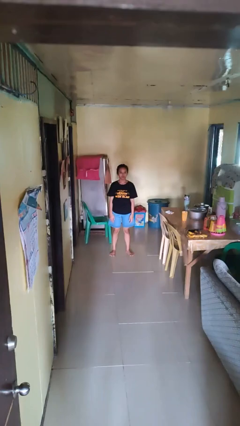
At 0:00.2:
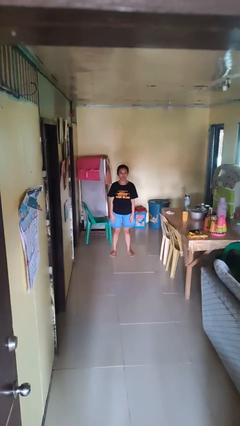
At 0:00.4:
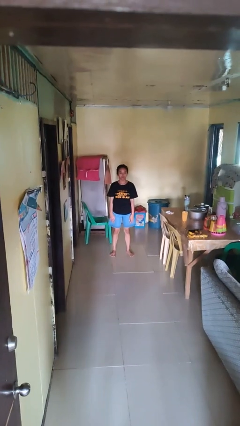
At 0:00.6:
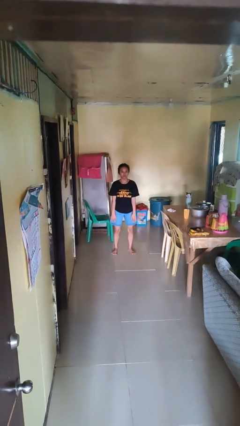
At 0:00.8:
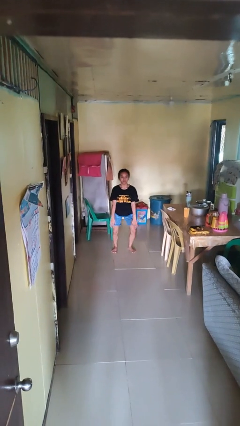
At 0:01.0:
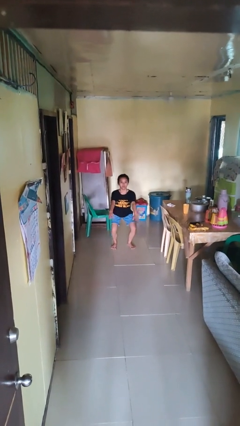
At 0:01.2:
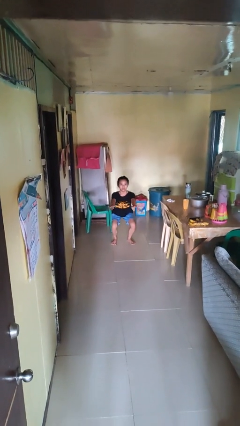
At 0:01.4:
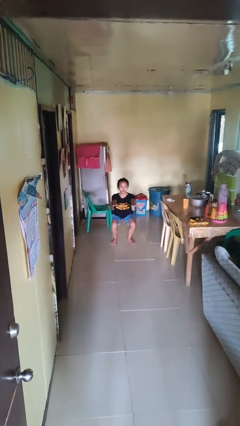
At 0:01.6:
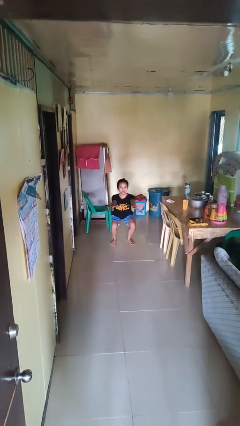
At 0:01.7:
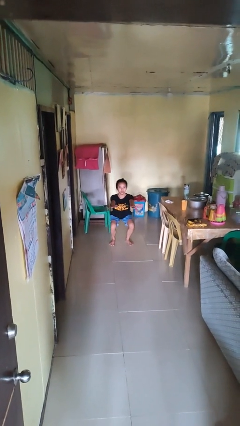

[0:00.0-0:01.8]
person squats

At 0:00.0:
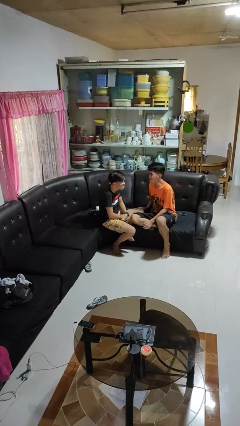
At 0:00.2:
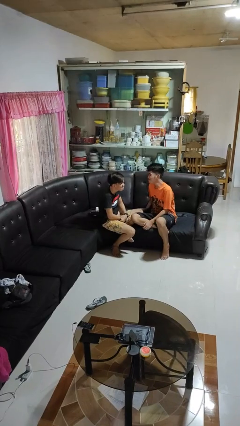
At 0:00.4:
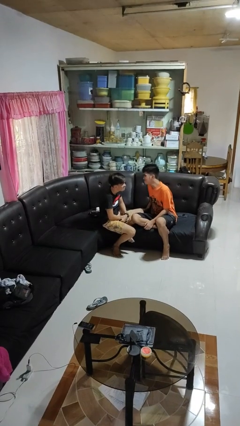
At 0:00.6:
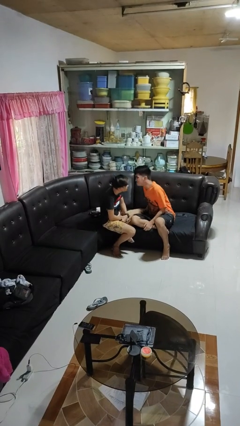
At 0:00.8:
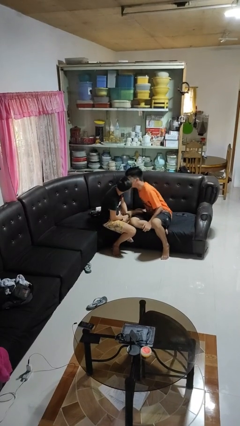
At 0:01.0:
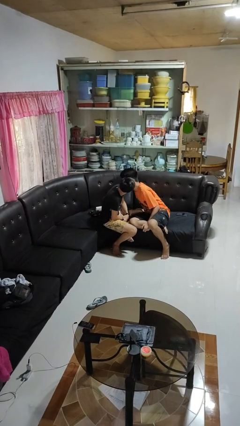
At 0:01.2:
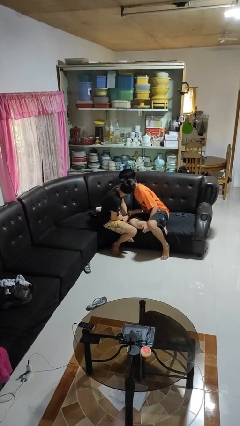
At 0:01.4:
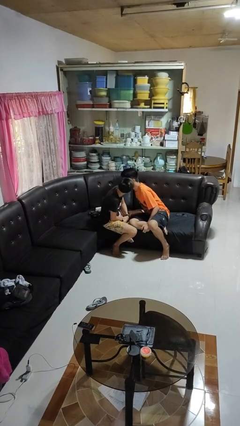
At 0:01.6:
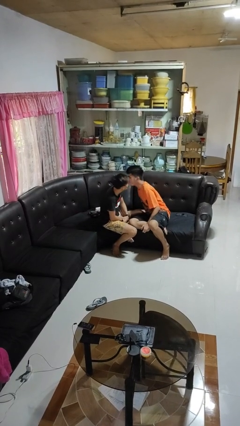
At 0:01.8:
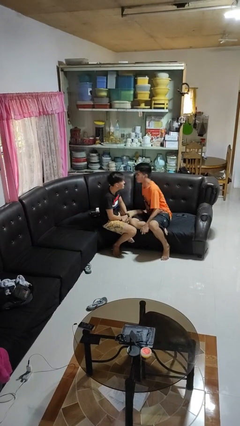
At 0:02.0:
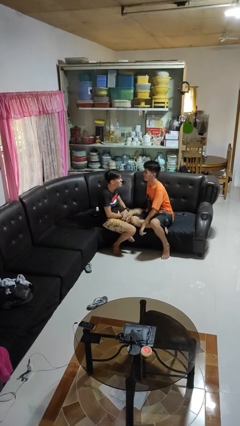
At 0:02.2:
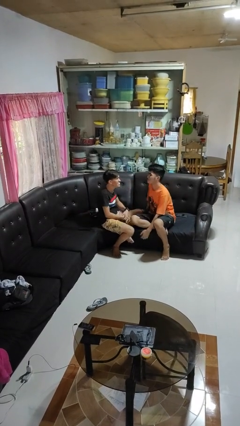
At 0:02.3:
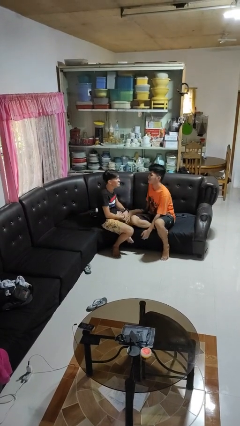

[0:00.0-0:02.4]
person kisses cheek of person

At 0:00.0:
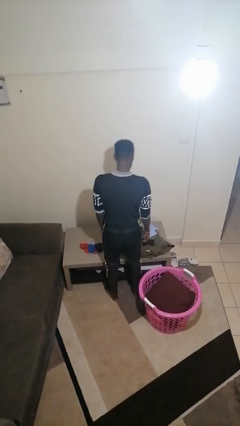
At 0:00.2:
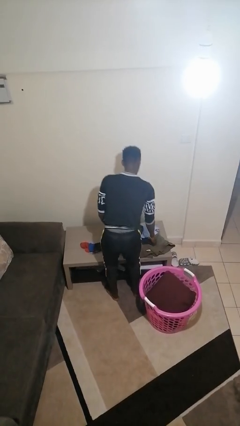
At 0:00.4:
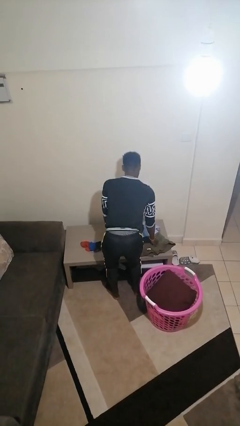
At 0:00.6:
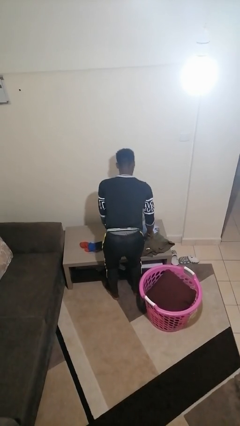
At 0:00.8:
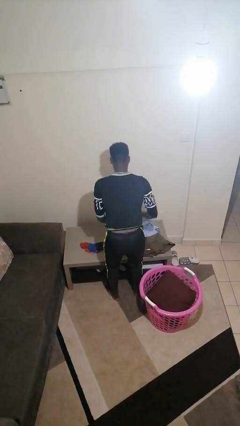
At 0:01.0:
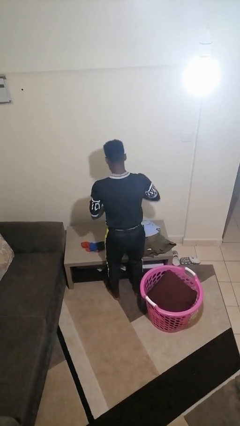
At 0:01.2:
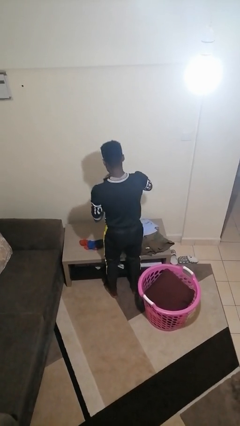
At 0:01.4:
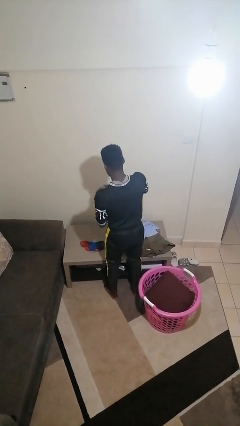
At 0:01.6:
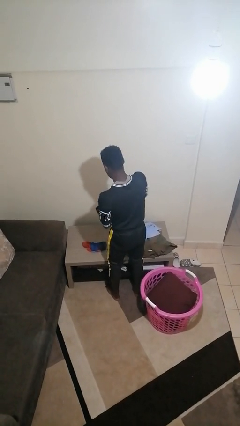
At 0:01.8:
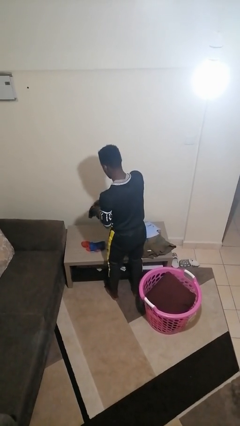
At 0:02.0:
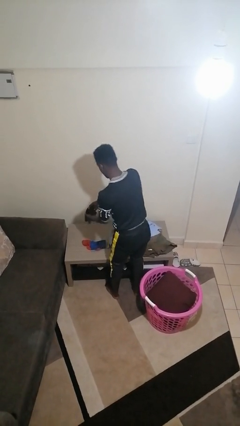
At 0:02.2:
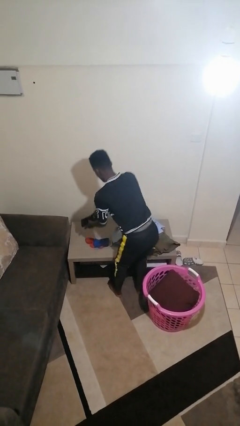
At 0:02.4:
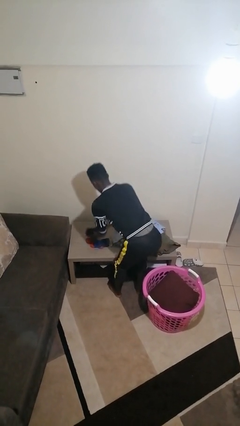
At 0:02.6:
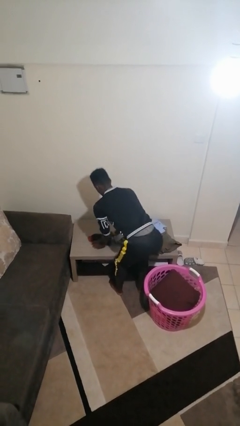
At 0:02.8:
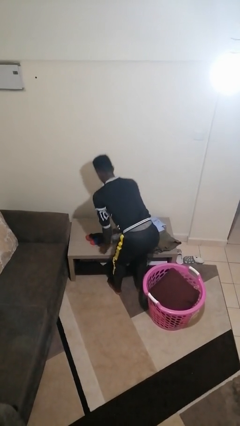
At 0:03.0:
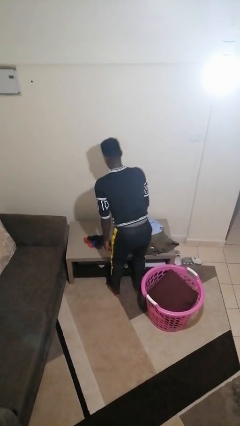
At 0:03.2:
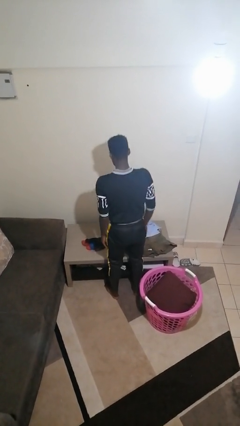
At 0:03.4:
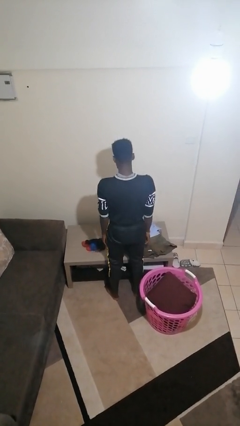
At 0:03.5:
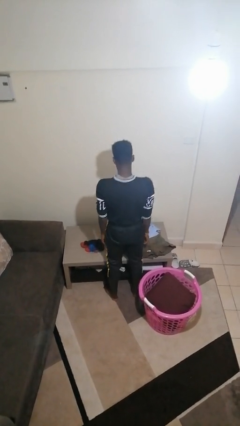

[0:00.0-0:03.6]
person folds socks

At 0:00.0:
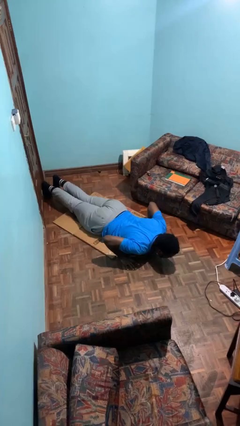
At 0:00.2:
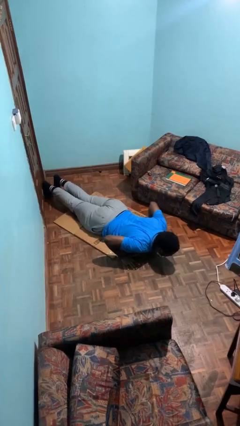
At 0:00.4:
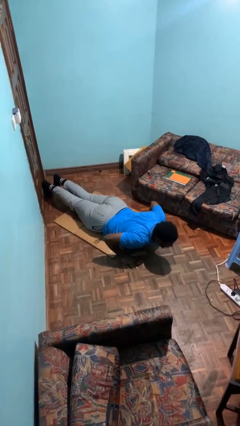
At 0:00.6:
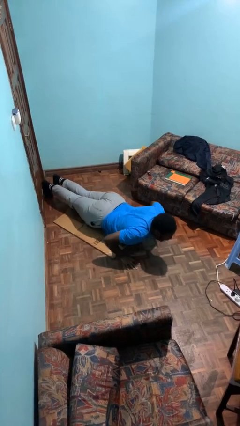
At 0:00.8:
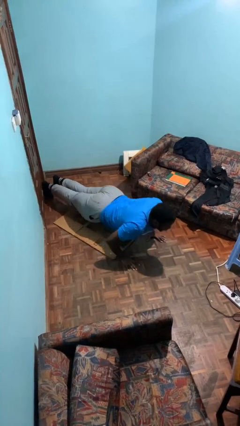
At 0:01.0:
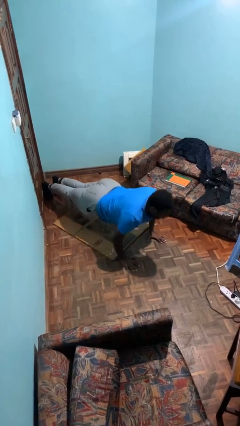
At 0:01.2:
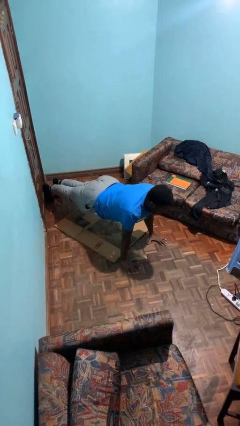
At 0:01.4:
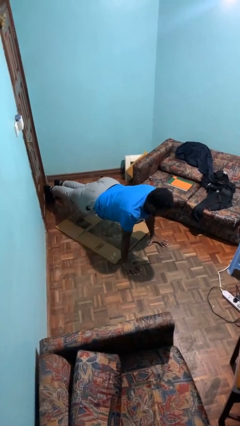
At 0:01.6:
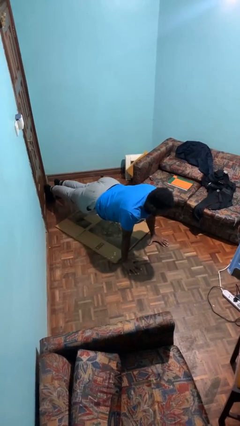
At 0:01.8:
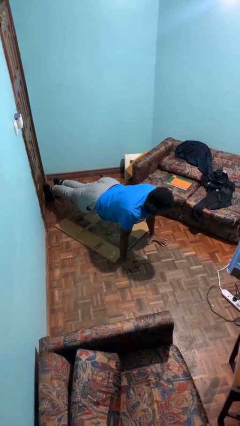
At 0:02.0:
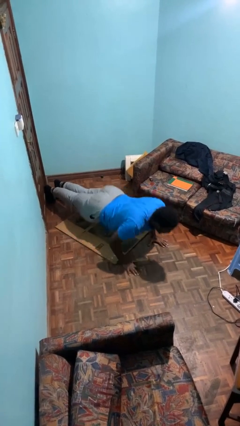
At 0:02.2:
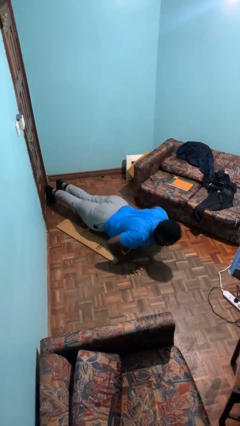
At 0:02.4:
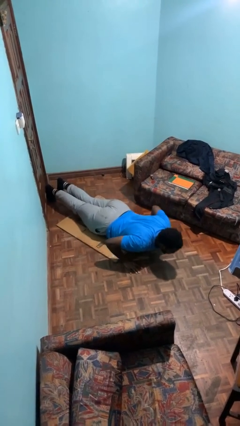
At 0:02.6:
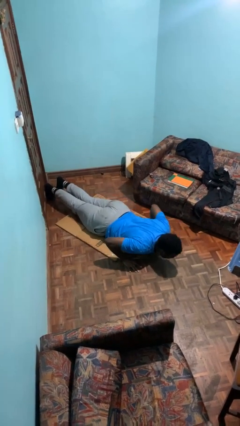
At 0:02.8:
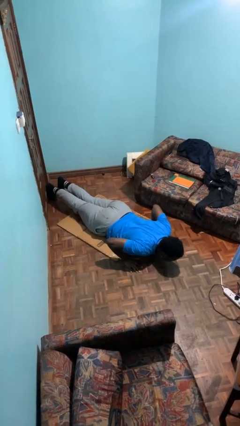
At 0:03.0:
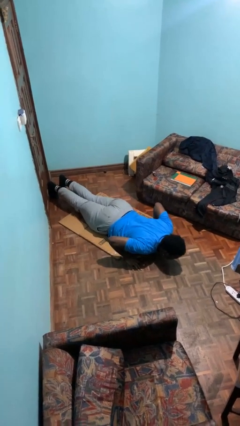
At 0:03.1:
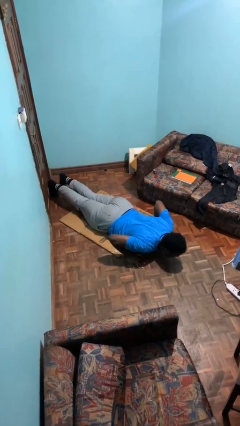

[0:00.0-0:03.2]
person exercises with pushup

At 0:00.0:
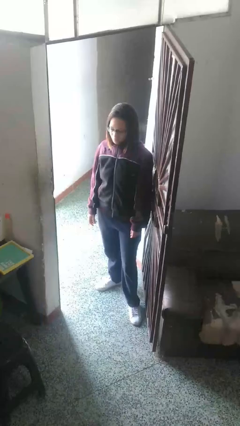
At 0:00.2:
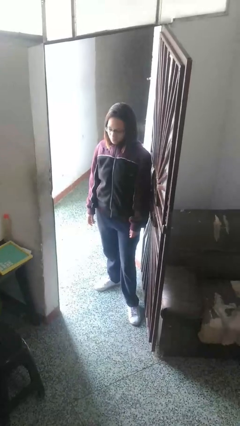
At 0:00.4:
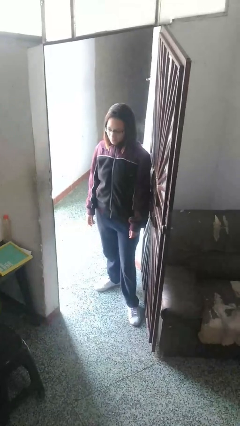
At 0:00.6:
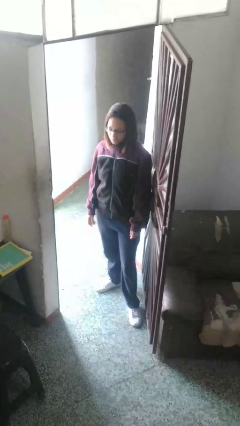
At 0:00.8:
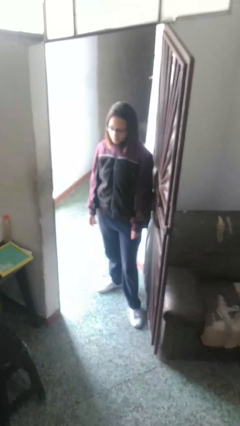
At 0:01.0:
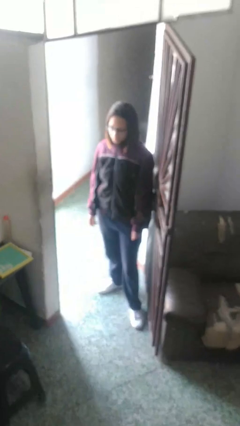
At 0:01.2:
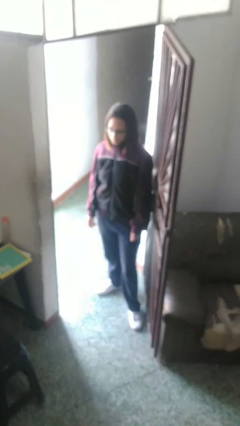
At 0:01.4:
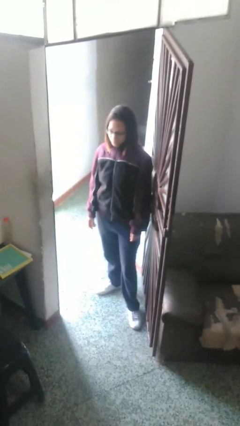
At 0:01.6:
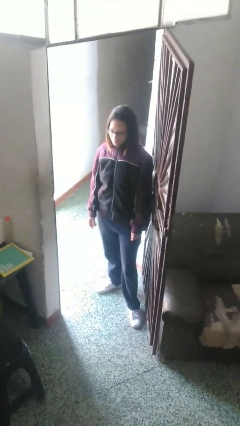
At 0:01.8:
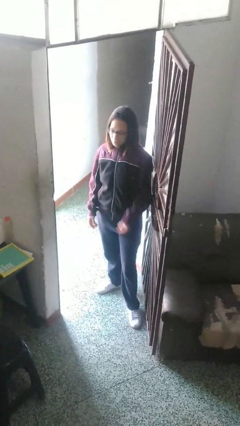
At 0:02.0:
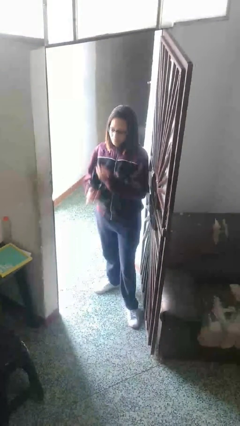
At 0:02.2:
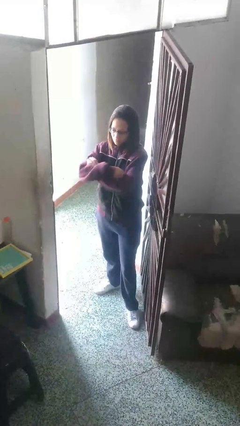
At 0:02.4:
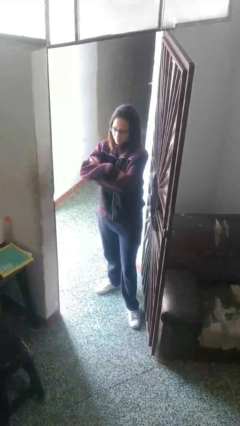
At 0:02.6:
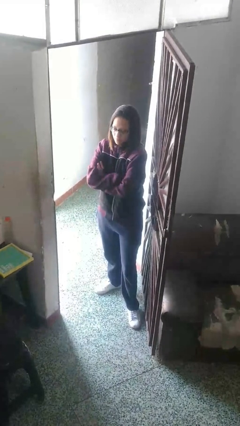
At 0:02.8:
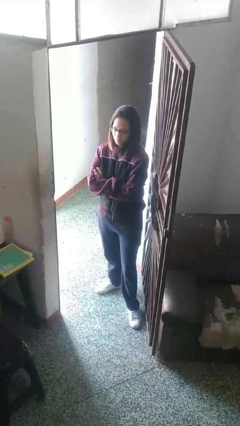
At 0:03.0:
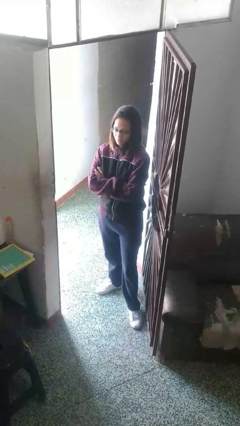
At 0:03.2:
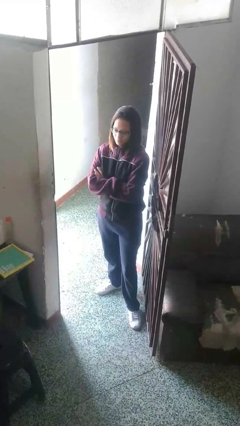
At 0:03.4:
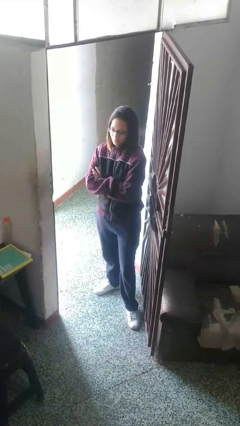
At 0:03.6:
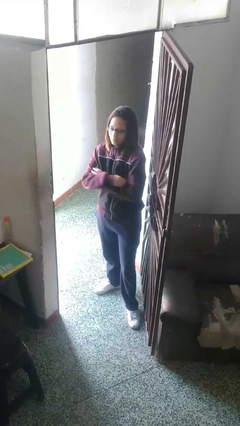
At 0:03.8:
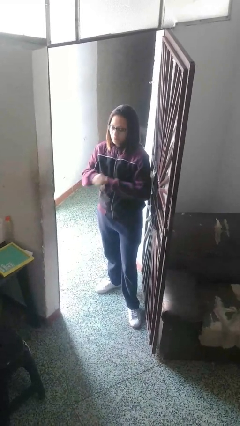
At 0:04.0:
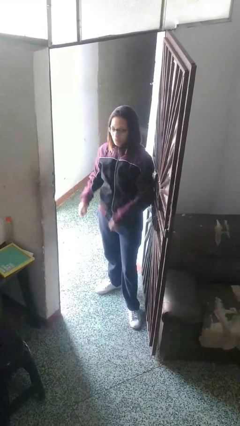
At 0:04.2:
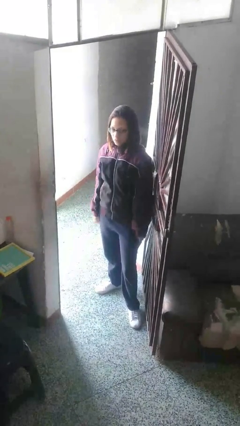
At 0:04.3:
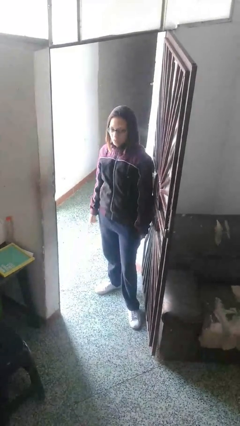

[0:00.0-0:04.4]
person gestures arms x

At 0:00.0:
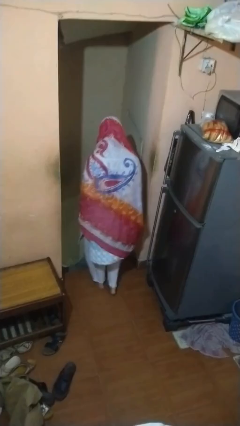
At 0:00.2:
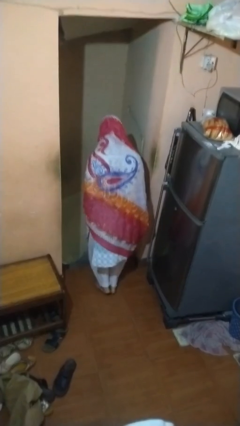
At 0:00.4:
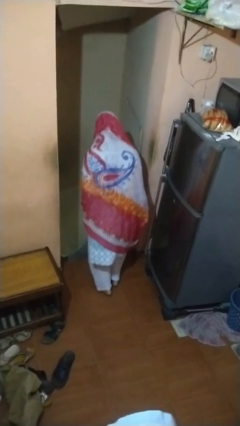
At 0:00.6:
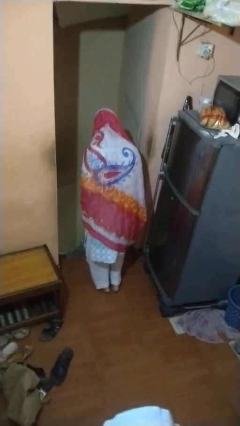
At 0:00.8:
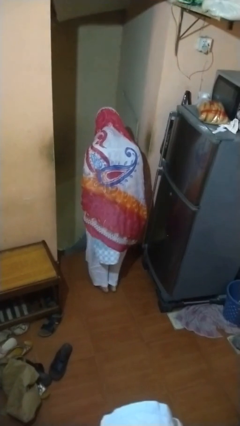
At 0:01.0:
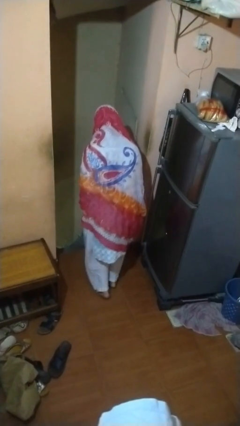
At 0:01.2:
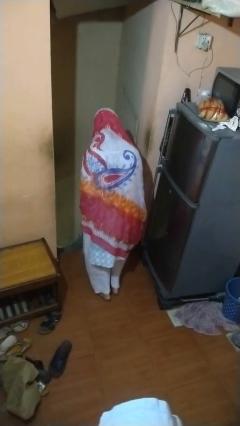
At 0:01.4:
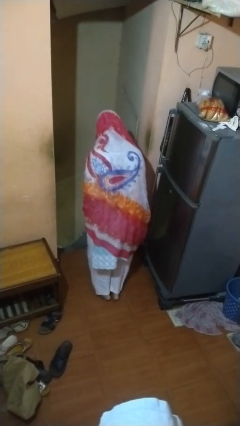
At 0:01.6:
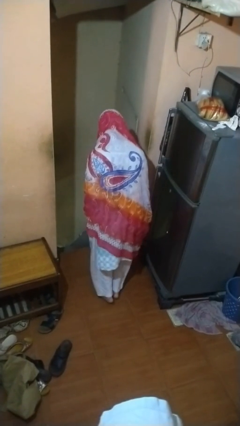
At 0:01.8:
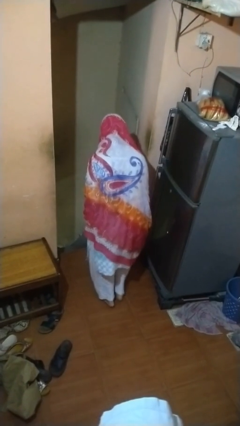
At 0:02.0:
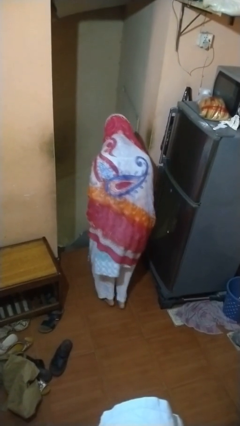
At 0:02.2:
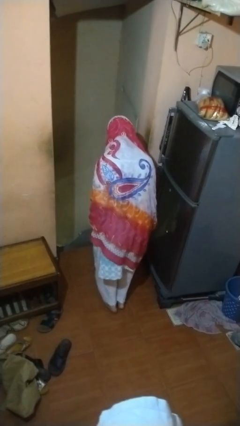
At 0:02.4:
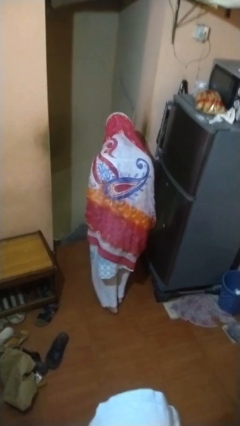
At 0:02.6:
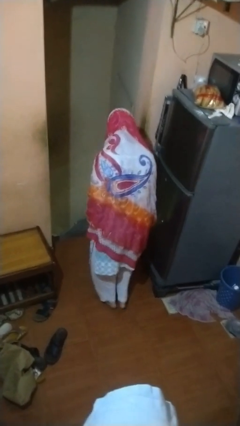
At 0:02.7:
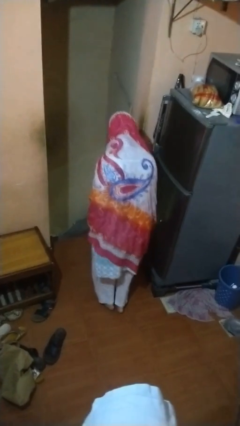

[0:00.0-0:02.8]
person walks tiptoe
